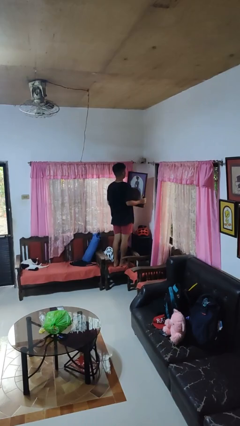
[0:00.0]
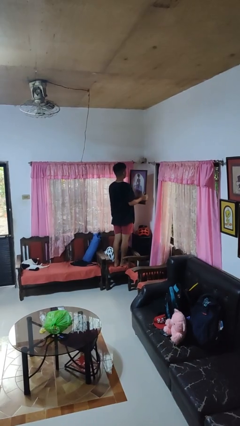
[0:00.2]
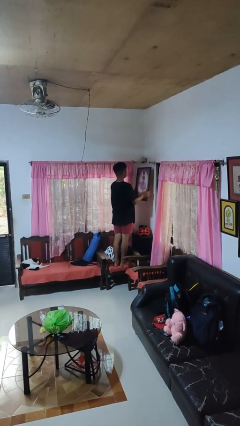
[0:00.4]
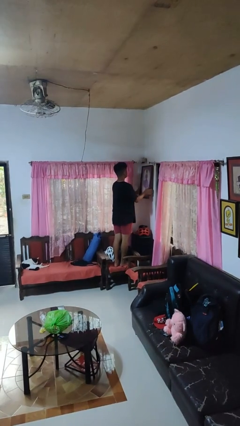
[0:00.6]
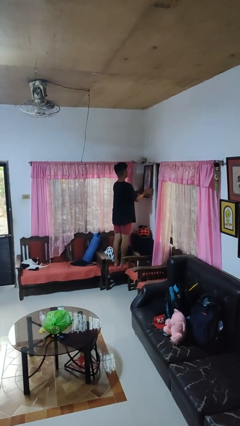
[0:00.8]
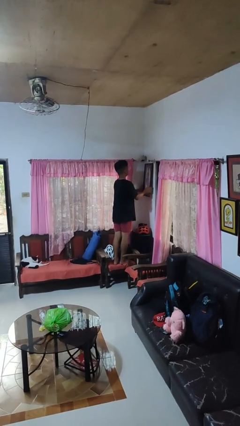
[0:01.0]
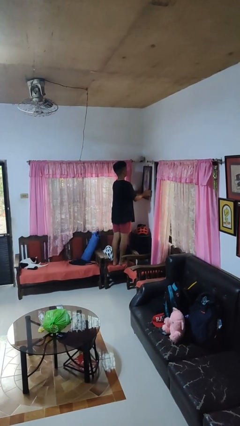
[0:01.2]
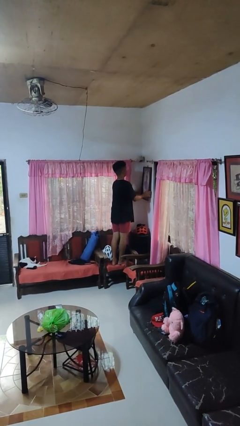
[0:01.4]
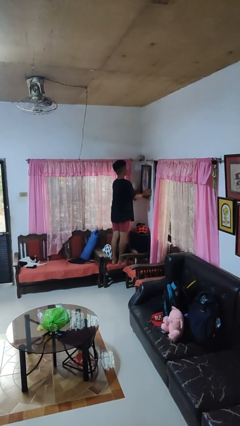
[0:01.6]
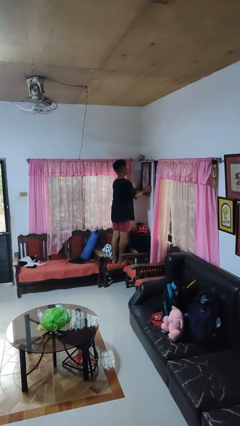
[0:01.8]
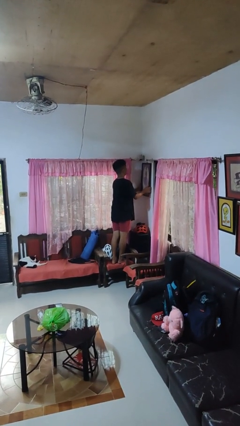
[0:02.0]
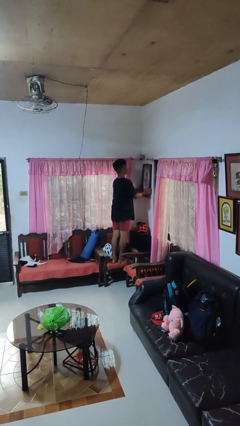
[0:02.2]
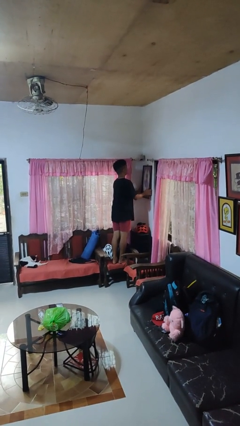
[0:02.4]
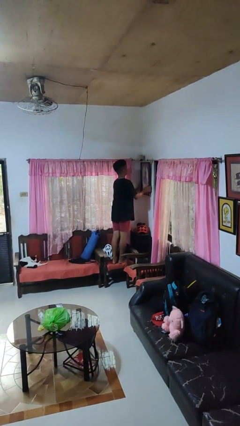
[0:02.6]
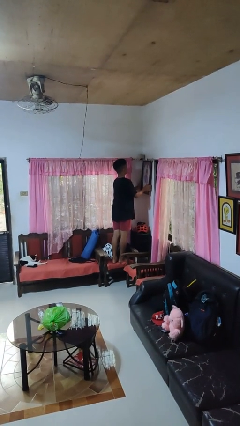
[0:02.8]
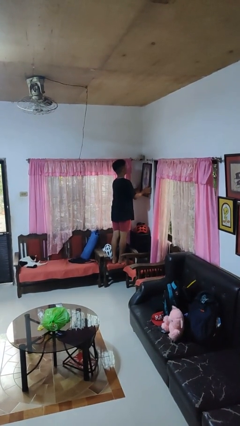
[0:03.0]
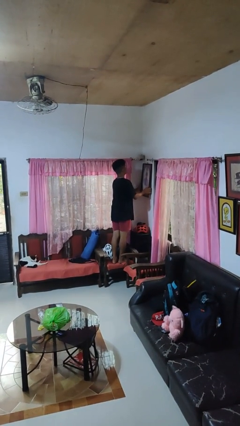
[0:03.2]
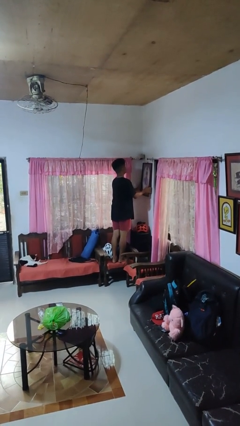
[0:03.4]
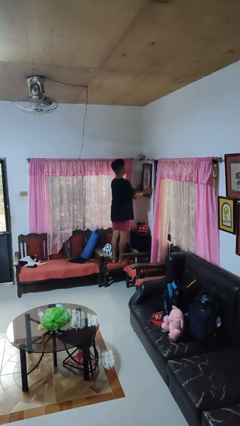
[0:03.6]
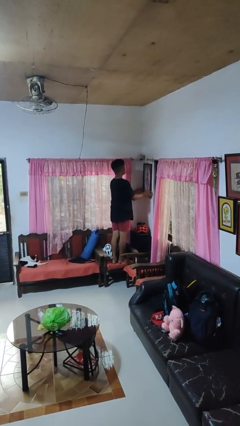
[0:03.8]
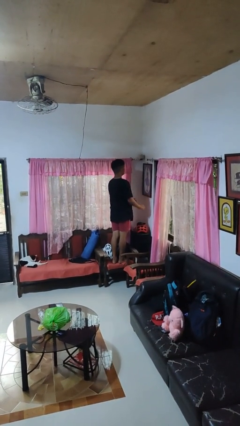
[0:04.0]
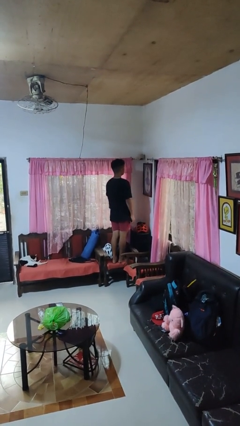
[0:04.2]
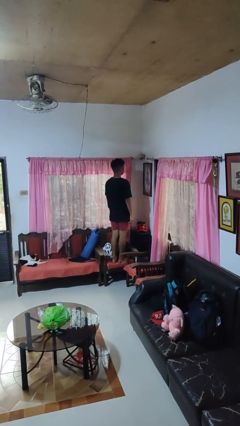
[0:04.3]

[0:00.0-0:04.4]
person puts up picture frame

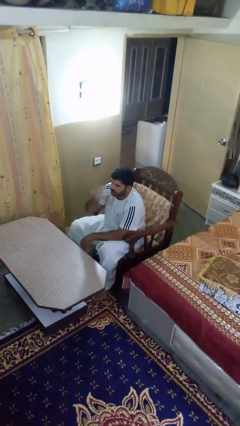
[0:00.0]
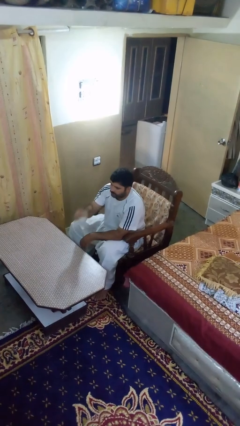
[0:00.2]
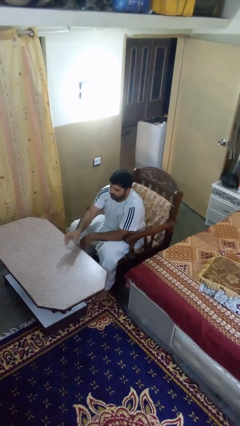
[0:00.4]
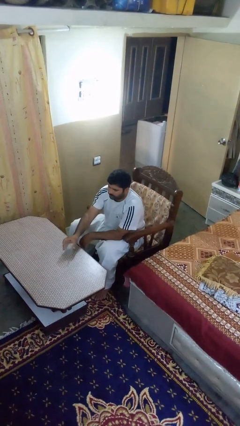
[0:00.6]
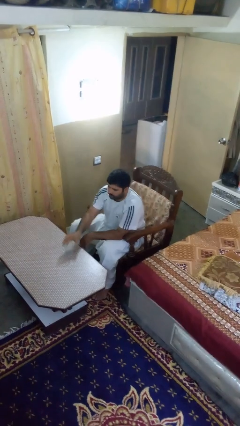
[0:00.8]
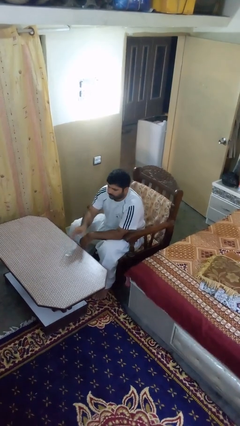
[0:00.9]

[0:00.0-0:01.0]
person puts down object on table

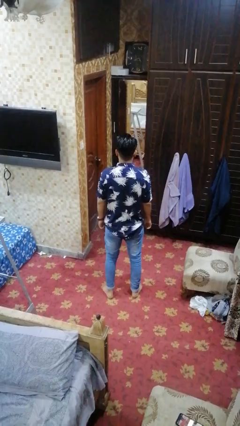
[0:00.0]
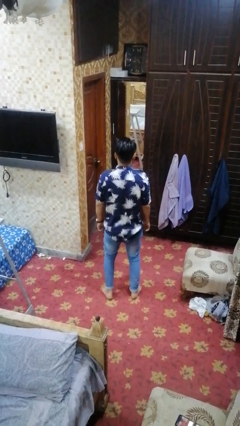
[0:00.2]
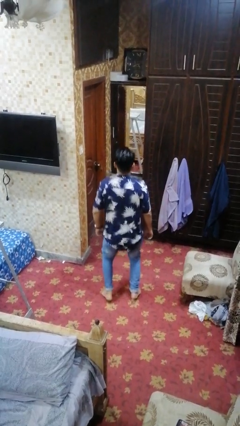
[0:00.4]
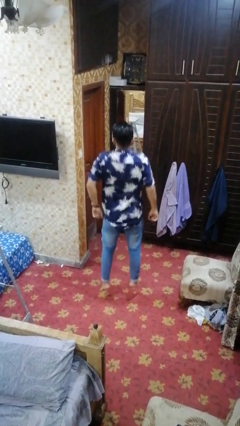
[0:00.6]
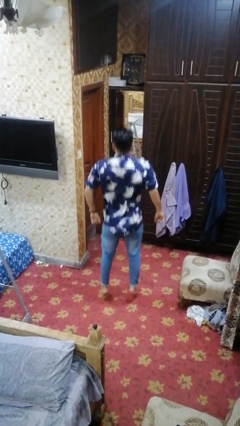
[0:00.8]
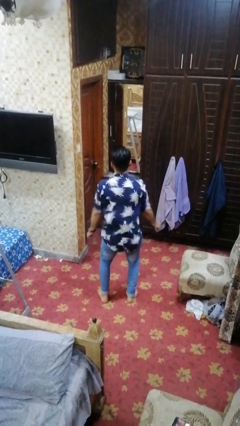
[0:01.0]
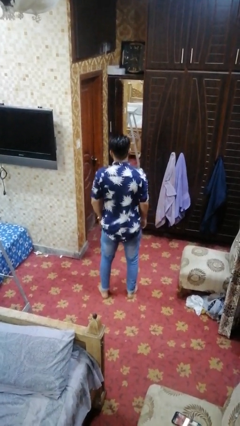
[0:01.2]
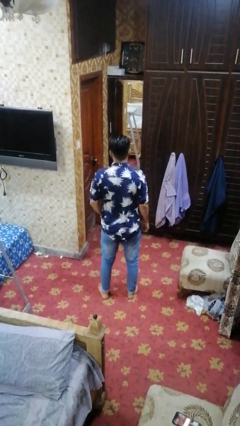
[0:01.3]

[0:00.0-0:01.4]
person jumps

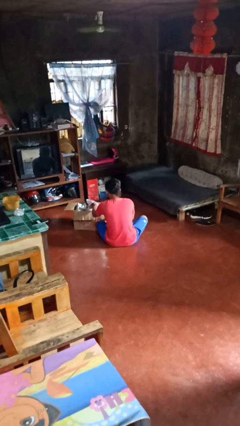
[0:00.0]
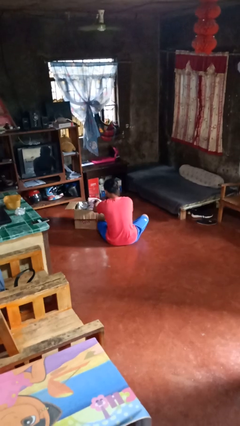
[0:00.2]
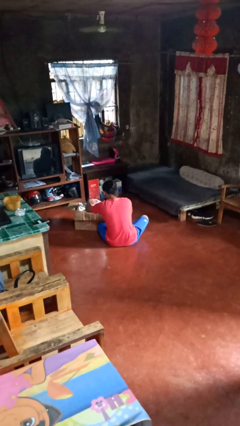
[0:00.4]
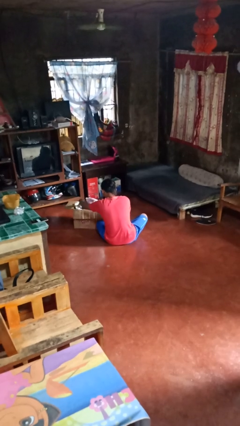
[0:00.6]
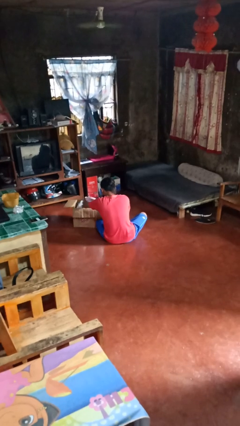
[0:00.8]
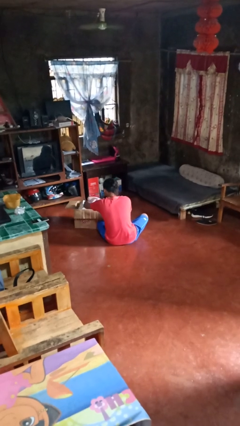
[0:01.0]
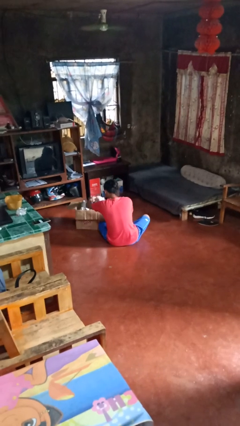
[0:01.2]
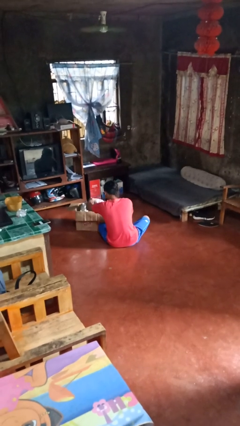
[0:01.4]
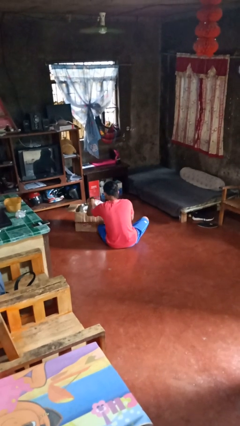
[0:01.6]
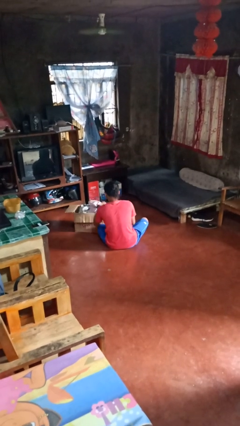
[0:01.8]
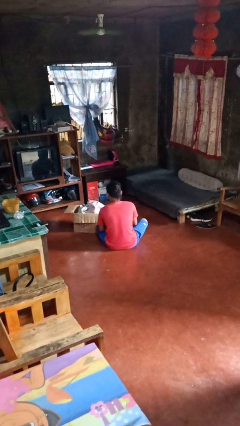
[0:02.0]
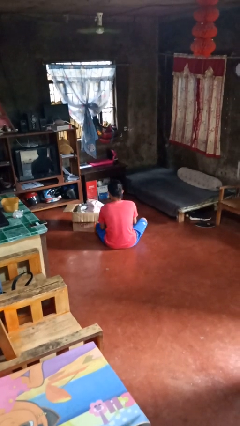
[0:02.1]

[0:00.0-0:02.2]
person searches in box

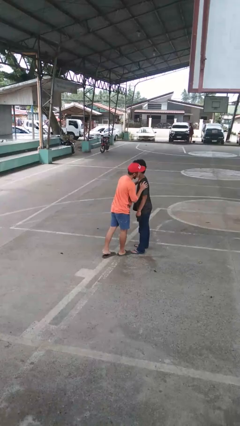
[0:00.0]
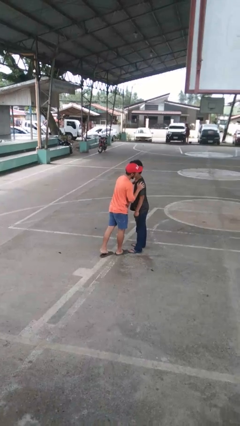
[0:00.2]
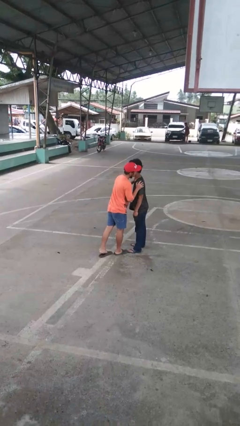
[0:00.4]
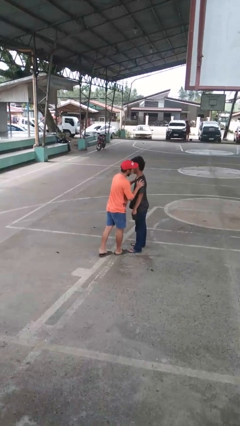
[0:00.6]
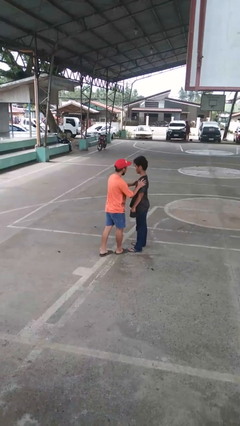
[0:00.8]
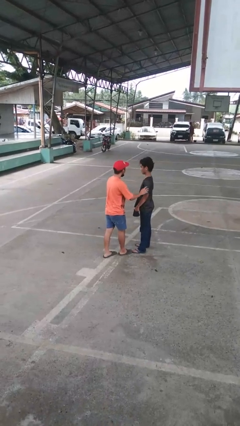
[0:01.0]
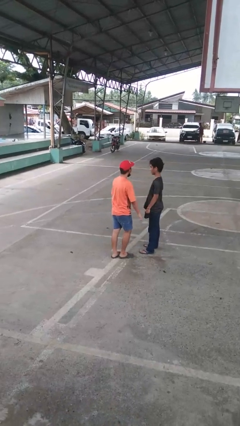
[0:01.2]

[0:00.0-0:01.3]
person kisses cheek of person

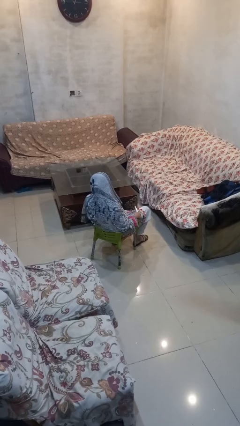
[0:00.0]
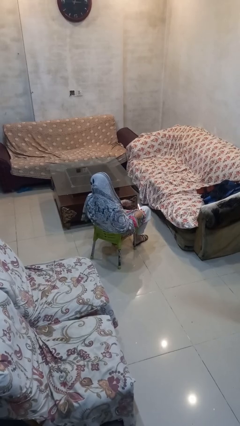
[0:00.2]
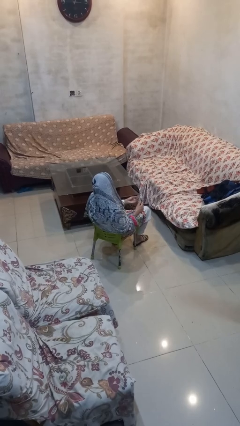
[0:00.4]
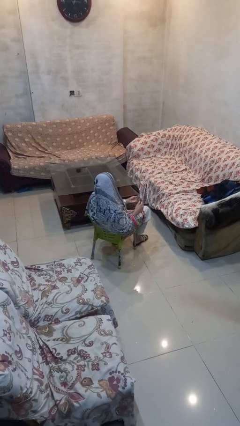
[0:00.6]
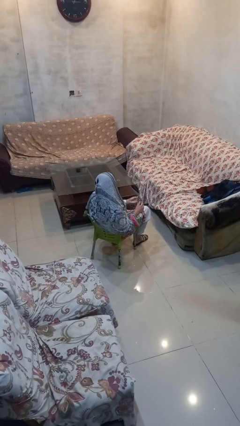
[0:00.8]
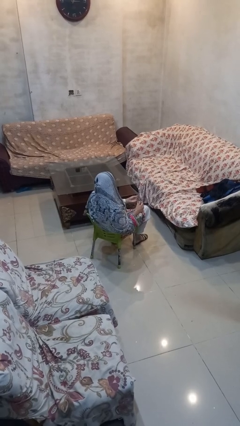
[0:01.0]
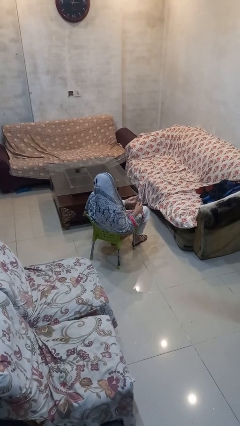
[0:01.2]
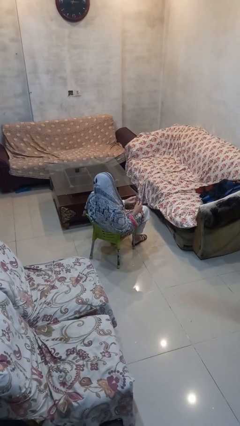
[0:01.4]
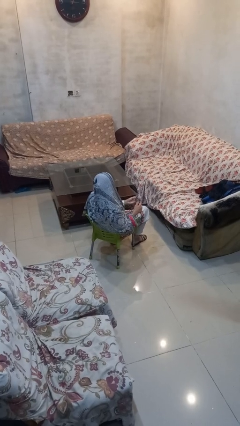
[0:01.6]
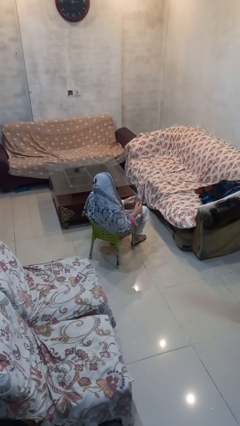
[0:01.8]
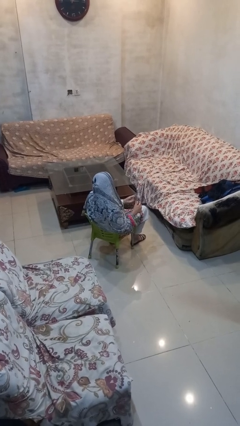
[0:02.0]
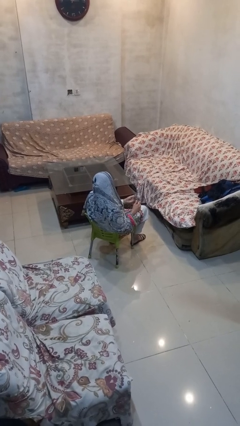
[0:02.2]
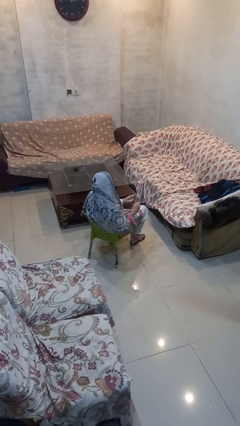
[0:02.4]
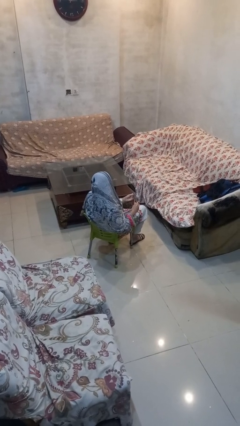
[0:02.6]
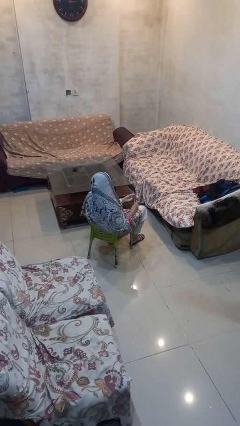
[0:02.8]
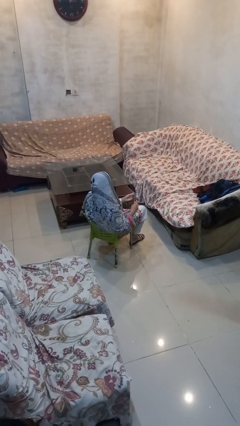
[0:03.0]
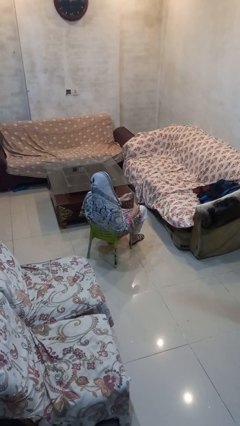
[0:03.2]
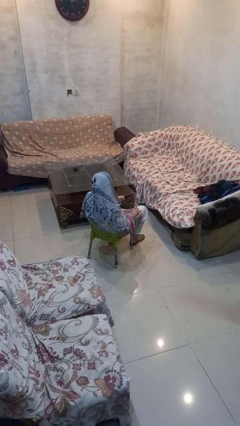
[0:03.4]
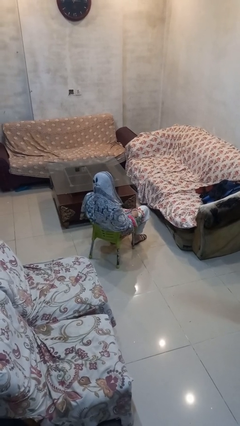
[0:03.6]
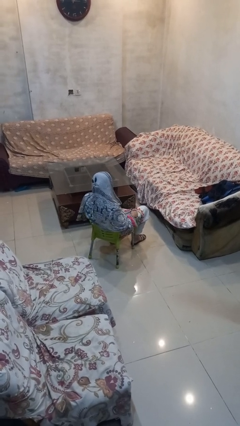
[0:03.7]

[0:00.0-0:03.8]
person files fingernails

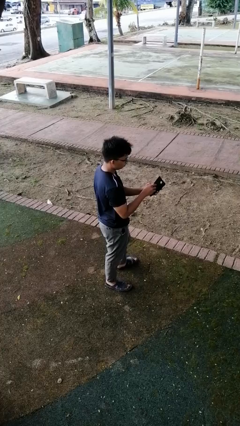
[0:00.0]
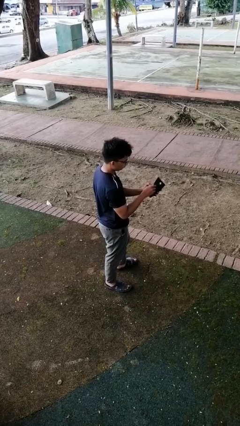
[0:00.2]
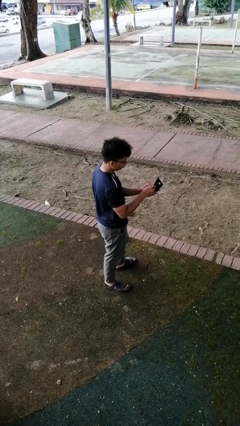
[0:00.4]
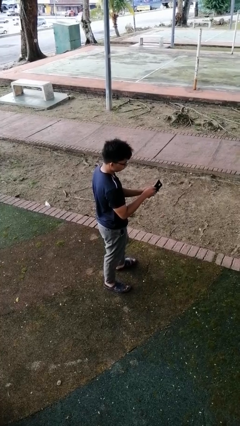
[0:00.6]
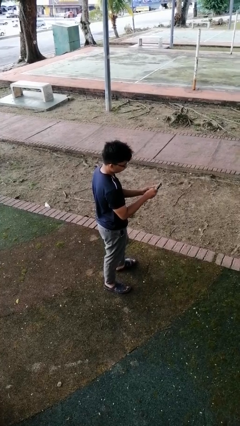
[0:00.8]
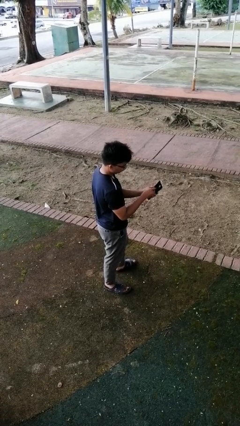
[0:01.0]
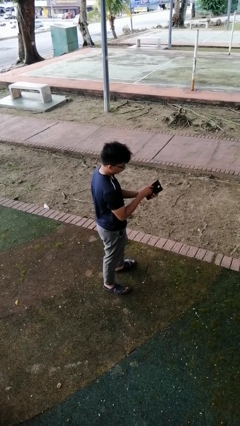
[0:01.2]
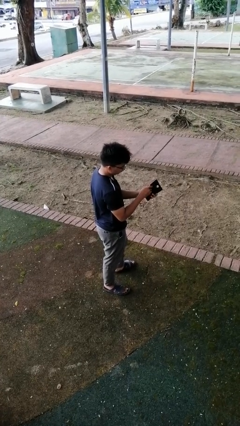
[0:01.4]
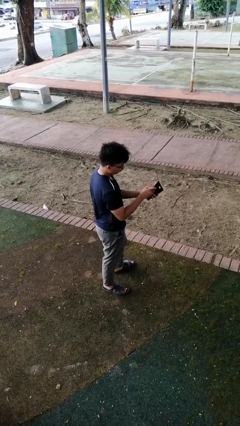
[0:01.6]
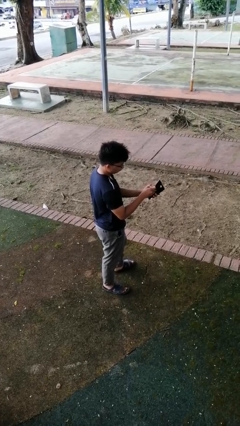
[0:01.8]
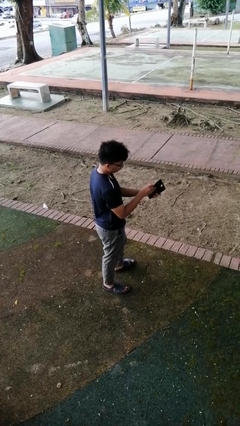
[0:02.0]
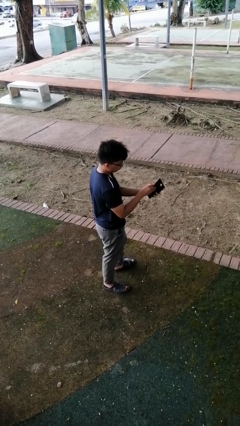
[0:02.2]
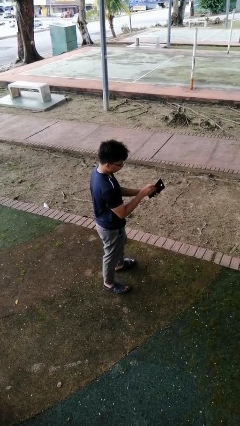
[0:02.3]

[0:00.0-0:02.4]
person searches in purse

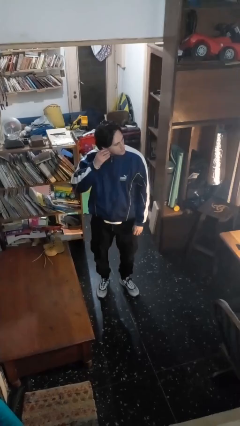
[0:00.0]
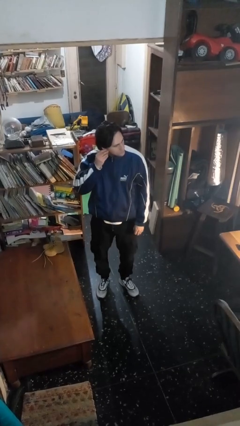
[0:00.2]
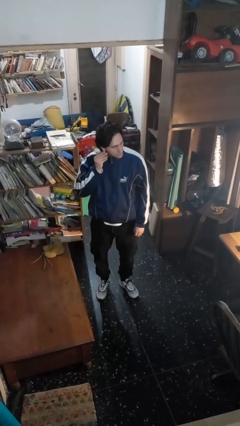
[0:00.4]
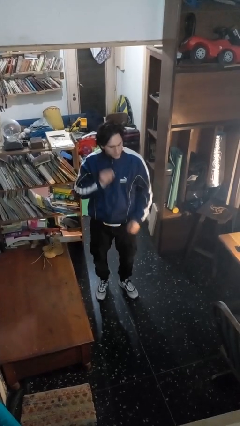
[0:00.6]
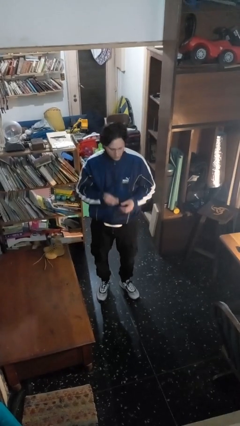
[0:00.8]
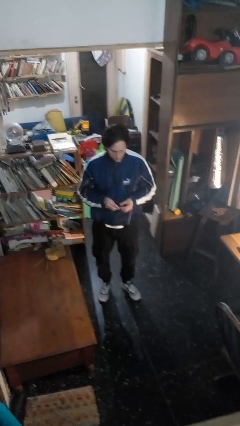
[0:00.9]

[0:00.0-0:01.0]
person takes off earrings
